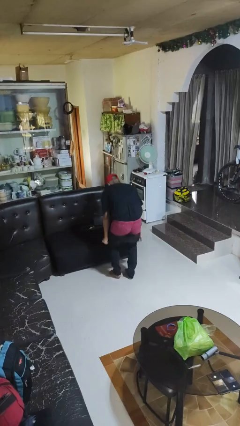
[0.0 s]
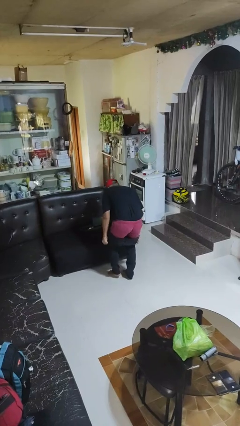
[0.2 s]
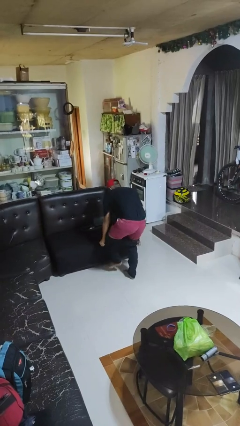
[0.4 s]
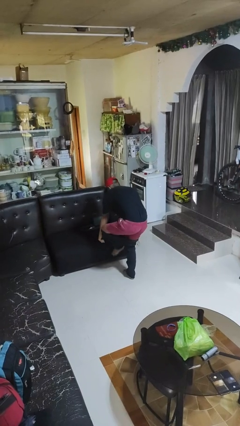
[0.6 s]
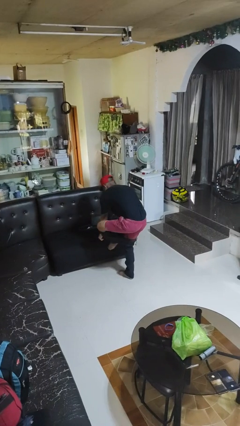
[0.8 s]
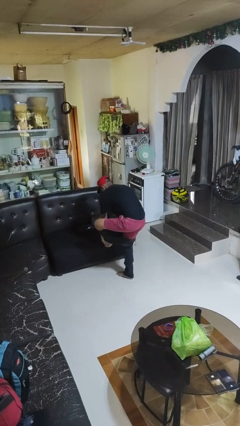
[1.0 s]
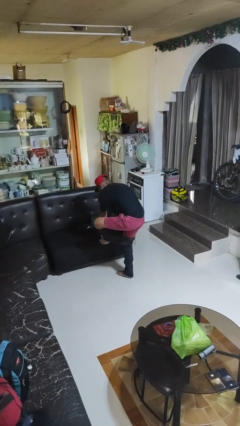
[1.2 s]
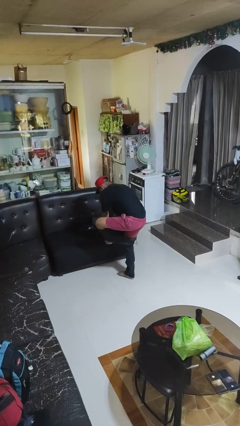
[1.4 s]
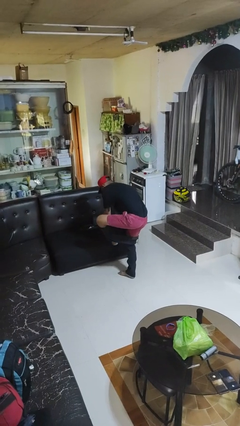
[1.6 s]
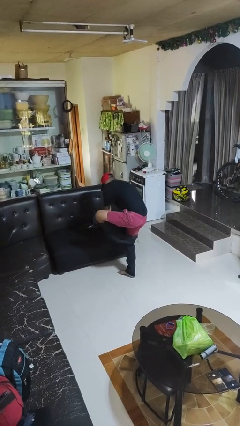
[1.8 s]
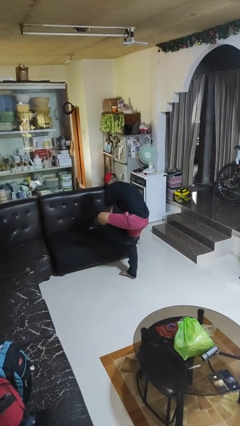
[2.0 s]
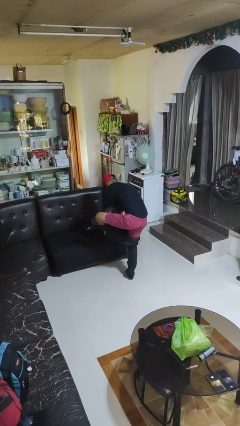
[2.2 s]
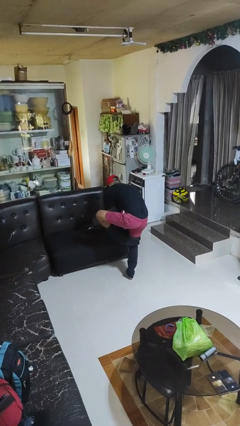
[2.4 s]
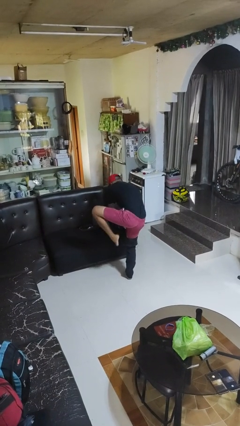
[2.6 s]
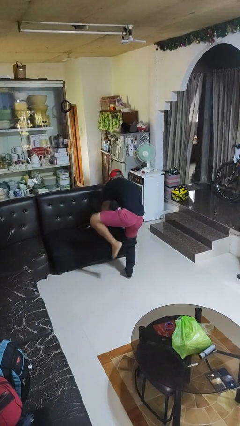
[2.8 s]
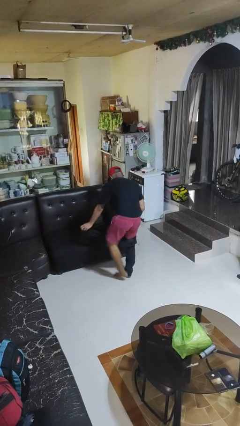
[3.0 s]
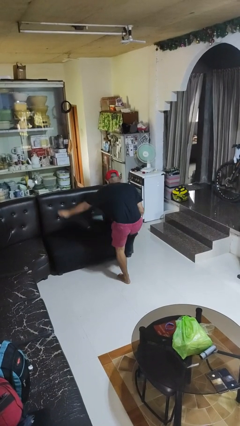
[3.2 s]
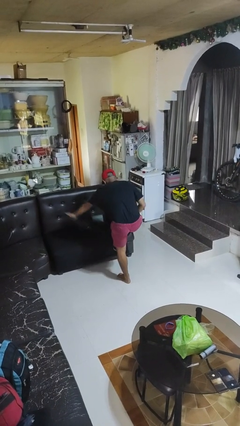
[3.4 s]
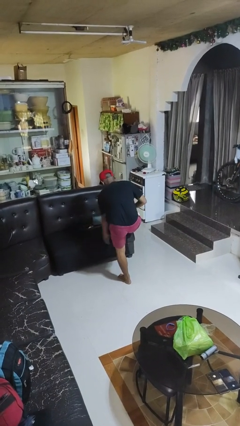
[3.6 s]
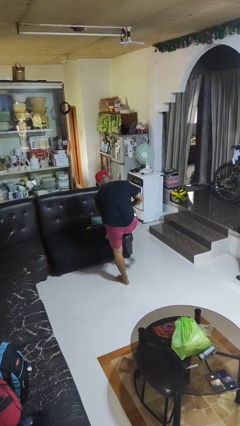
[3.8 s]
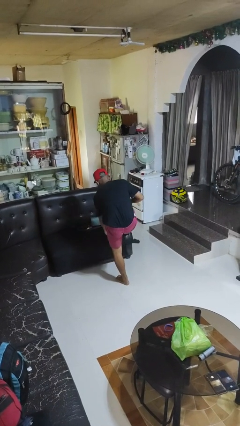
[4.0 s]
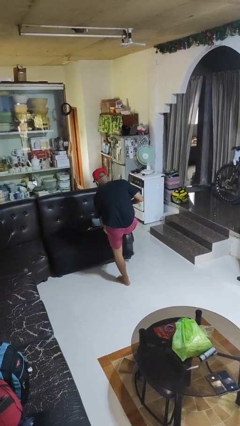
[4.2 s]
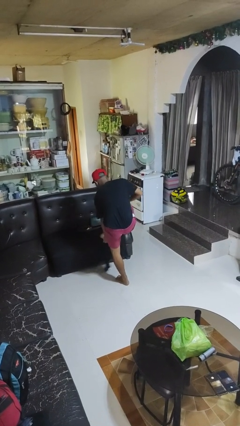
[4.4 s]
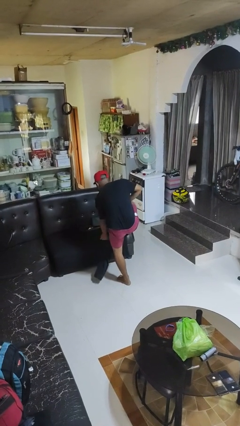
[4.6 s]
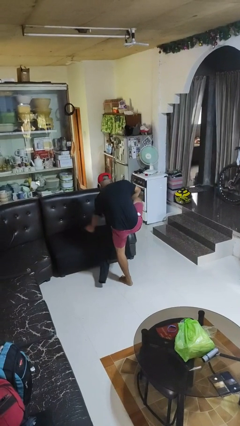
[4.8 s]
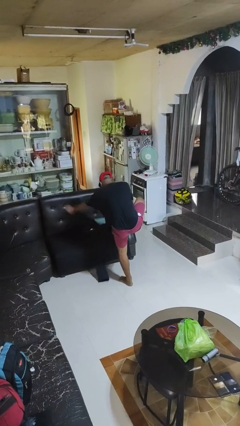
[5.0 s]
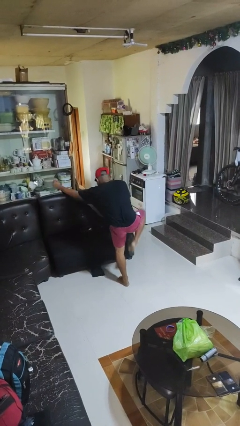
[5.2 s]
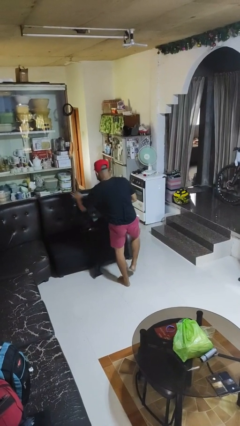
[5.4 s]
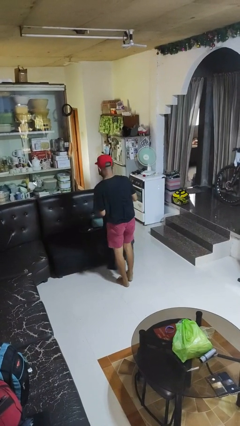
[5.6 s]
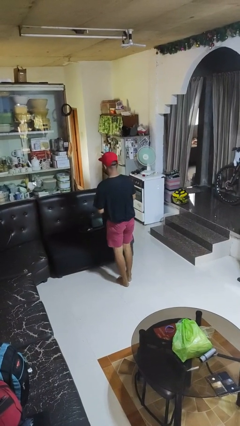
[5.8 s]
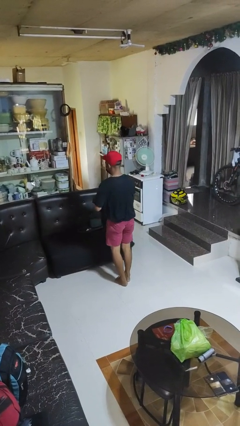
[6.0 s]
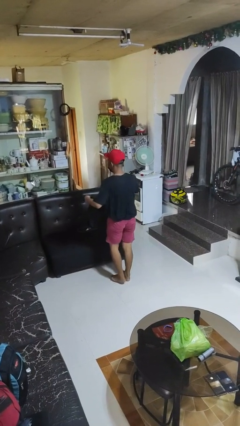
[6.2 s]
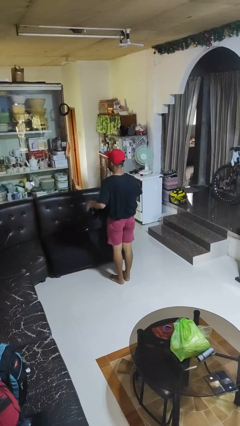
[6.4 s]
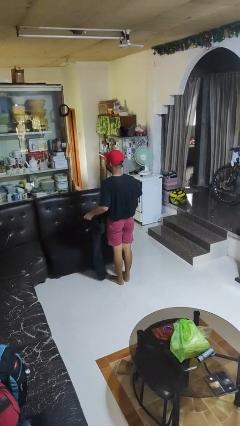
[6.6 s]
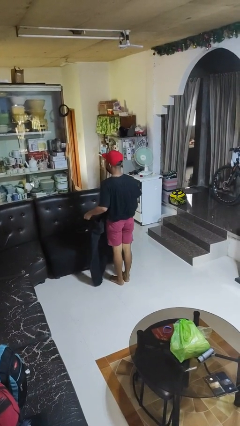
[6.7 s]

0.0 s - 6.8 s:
person takes off pants

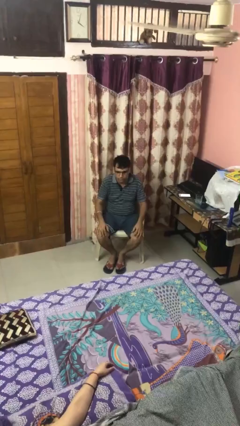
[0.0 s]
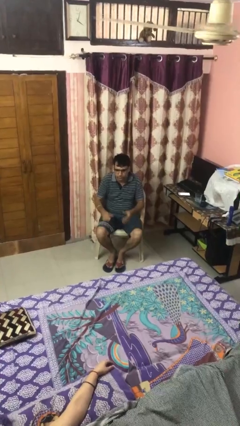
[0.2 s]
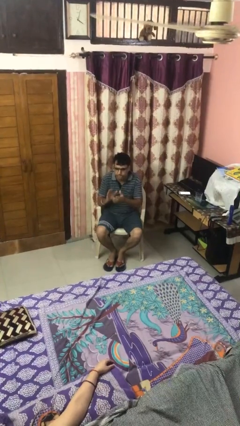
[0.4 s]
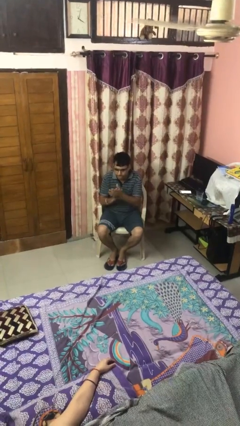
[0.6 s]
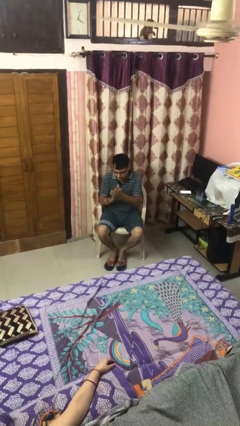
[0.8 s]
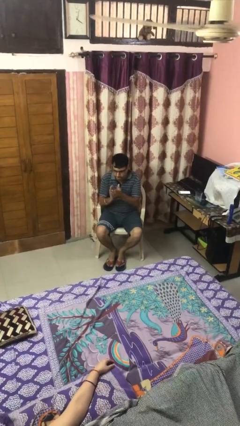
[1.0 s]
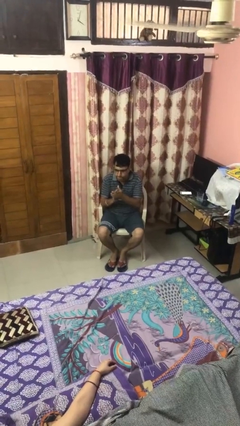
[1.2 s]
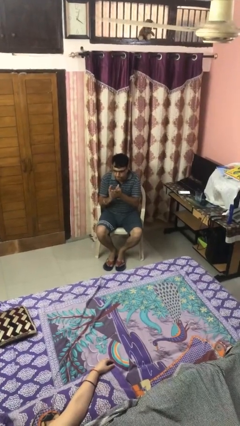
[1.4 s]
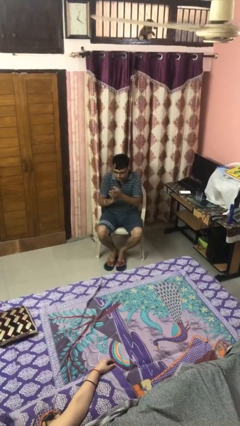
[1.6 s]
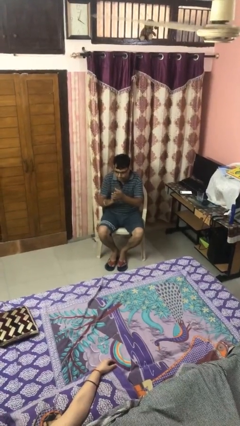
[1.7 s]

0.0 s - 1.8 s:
person claps hands

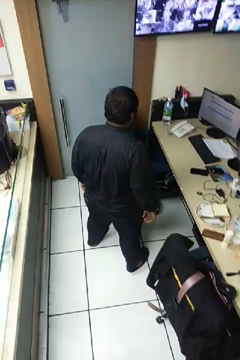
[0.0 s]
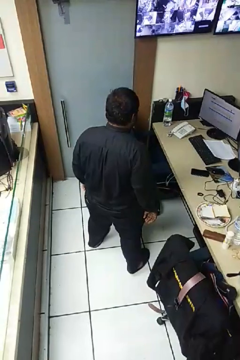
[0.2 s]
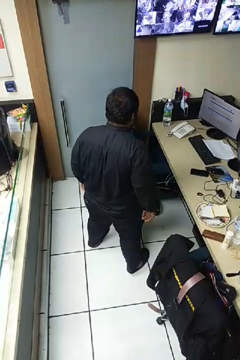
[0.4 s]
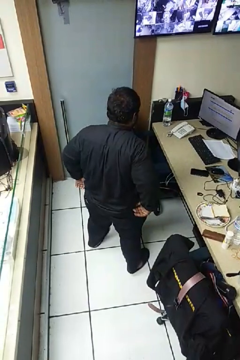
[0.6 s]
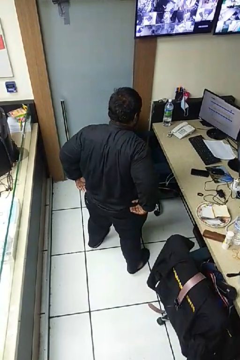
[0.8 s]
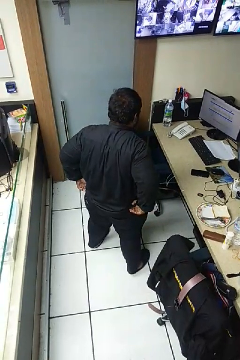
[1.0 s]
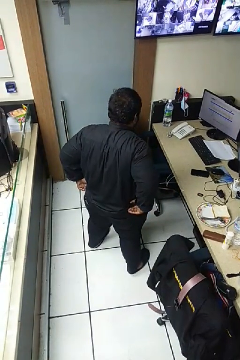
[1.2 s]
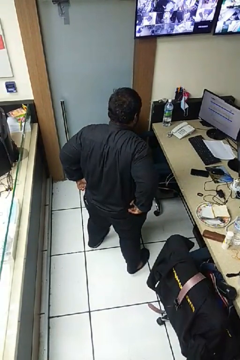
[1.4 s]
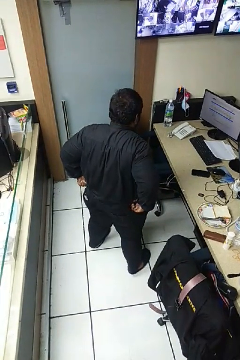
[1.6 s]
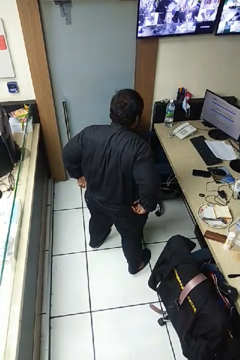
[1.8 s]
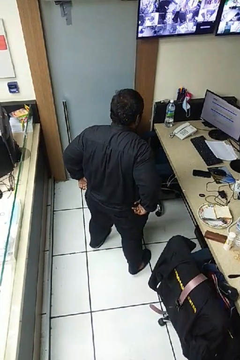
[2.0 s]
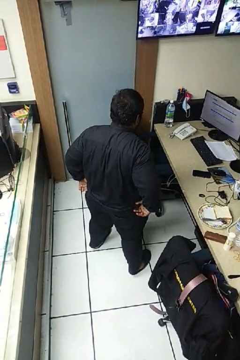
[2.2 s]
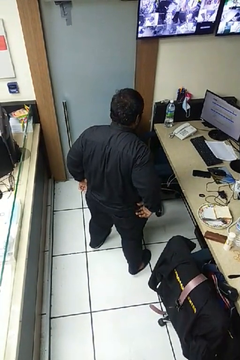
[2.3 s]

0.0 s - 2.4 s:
person hikes up pants

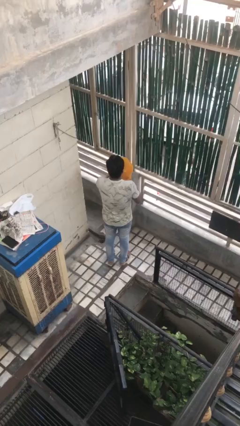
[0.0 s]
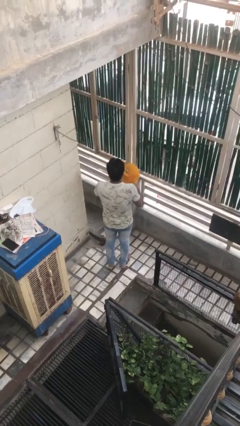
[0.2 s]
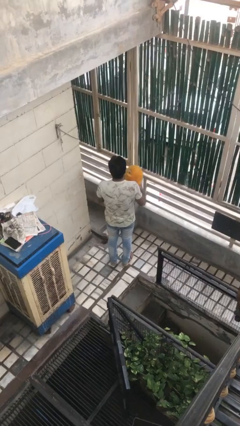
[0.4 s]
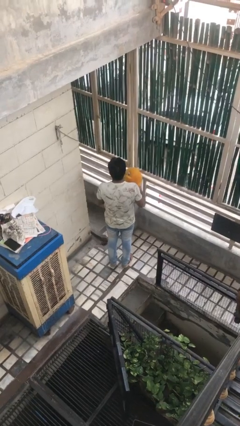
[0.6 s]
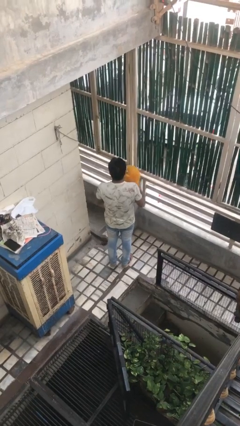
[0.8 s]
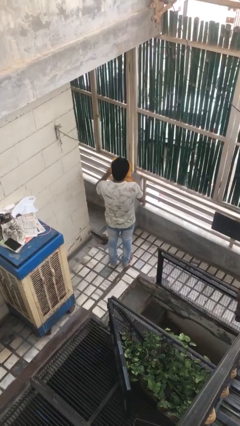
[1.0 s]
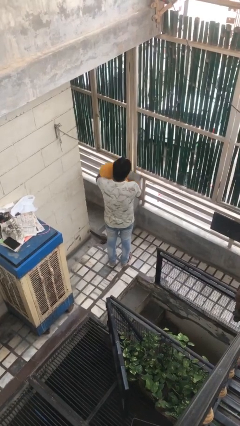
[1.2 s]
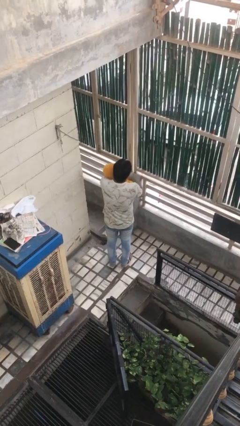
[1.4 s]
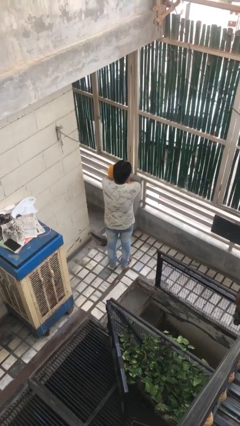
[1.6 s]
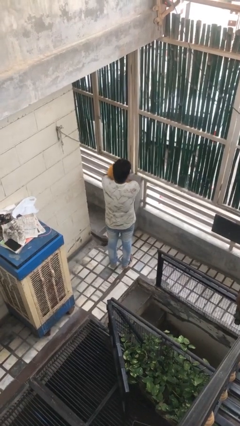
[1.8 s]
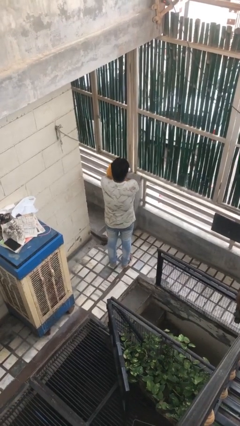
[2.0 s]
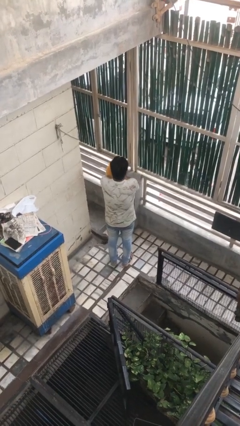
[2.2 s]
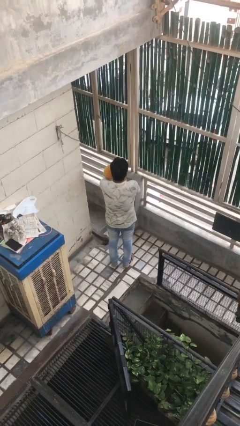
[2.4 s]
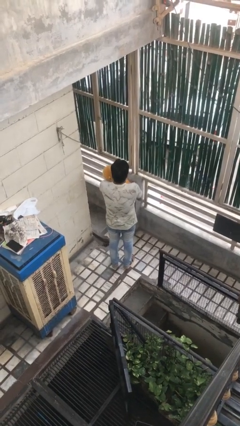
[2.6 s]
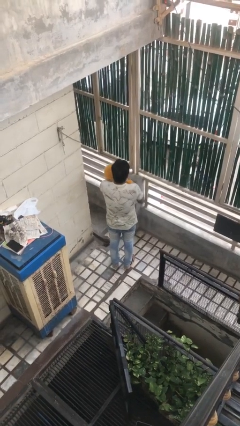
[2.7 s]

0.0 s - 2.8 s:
person hugs stuffed animal

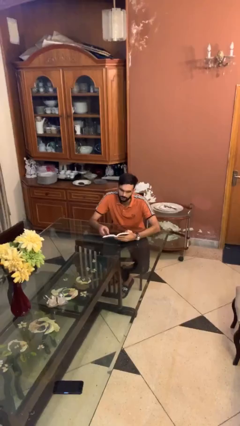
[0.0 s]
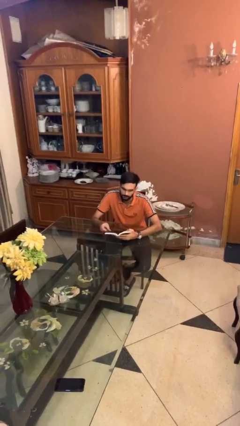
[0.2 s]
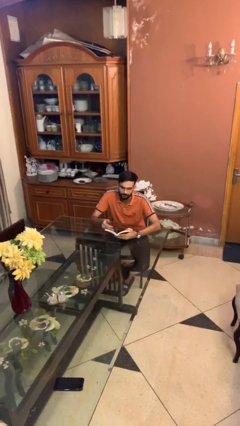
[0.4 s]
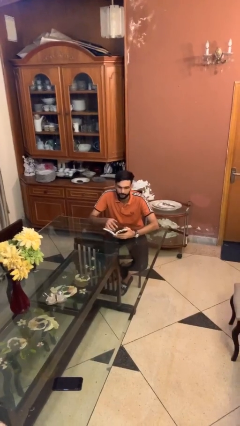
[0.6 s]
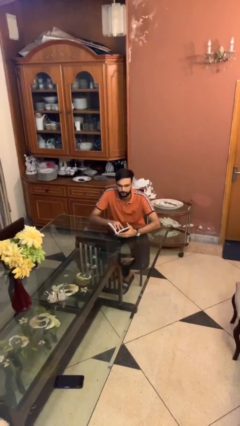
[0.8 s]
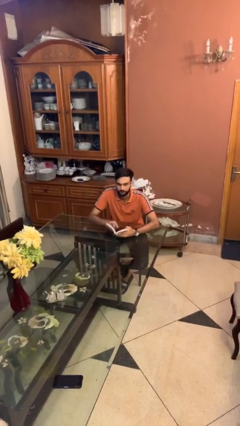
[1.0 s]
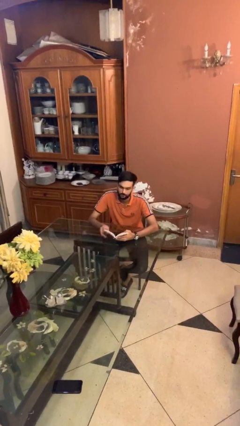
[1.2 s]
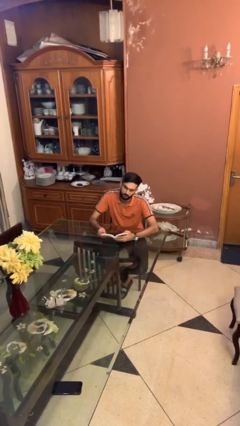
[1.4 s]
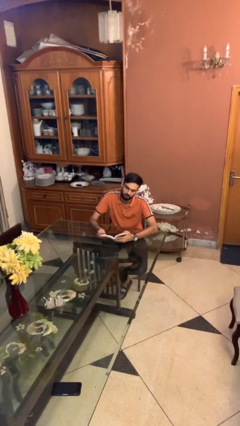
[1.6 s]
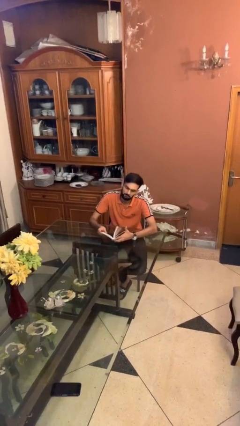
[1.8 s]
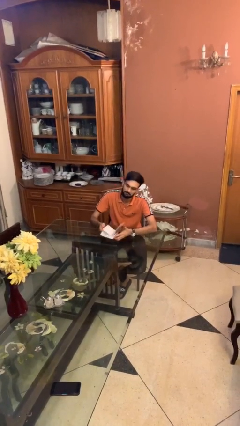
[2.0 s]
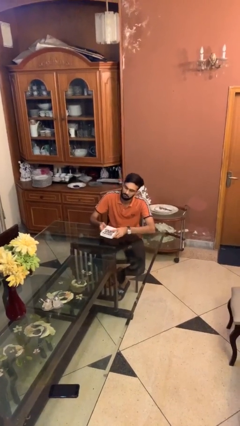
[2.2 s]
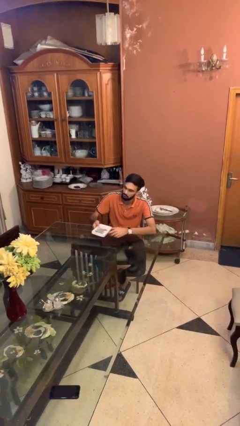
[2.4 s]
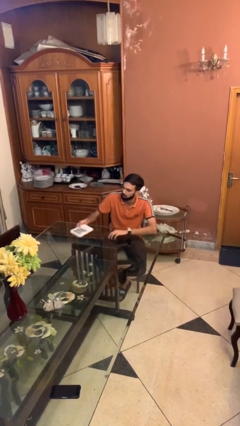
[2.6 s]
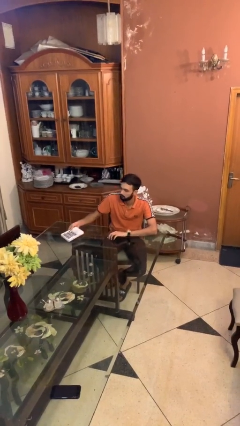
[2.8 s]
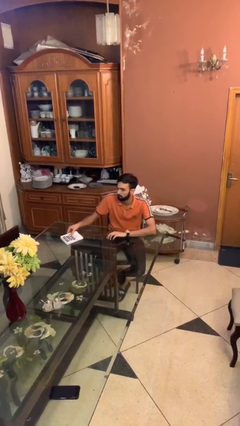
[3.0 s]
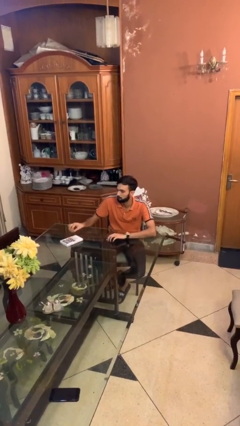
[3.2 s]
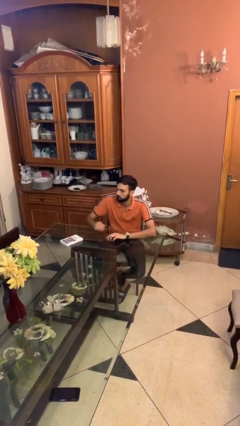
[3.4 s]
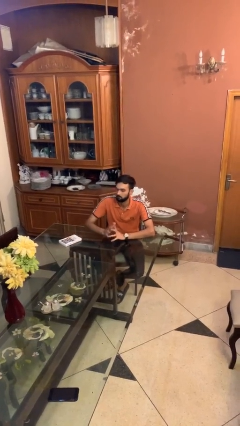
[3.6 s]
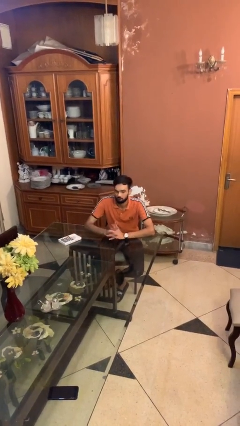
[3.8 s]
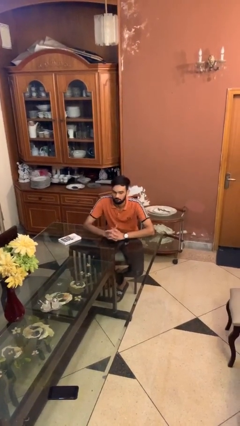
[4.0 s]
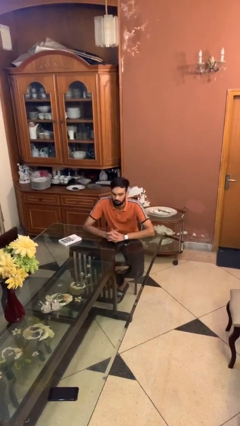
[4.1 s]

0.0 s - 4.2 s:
person puts down object on table
